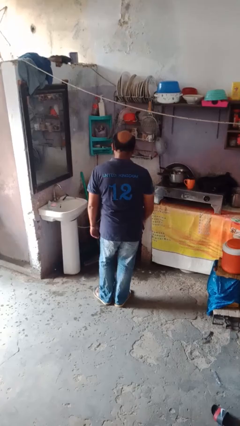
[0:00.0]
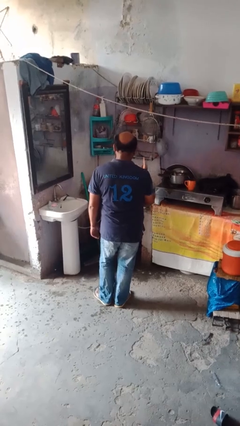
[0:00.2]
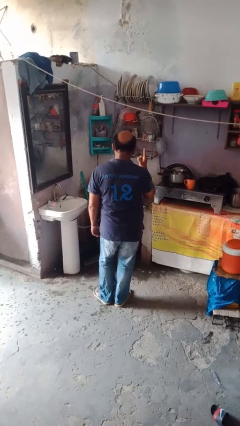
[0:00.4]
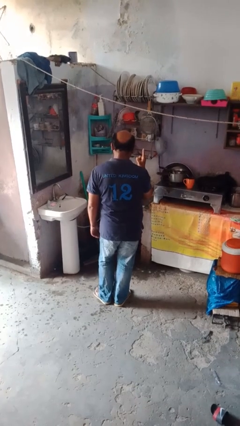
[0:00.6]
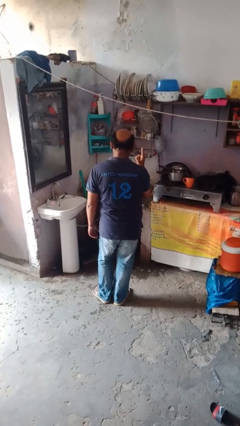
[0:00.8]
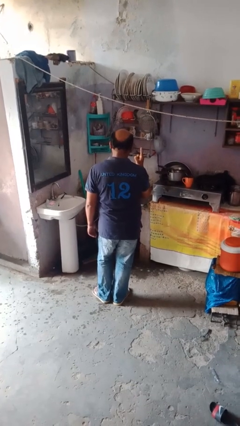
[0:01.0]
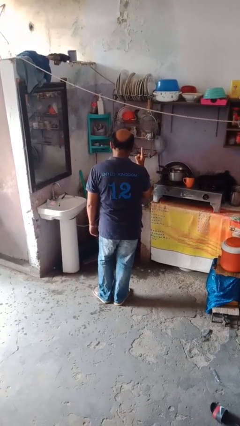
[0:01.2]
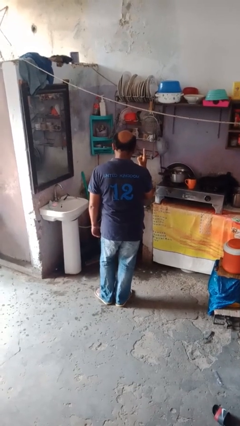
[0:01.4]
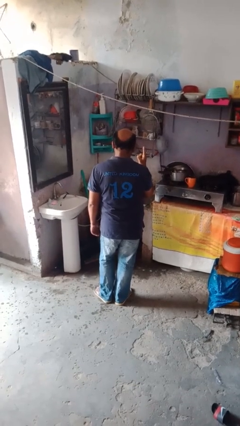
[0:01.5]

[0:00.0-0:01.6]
person gestures number one

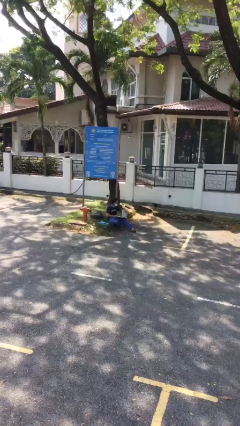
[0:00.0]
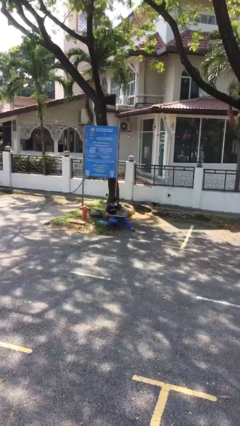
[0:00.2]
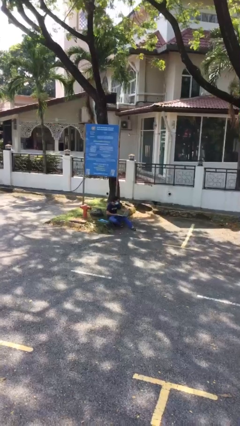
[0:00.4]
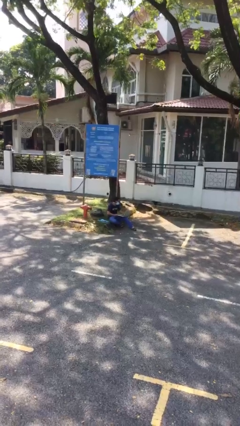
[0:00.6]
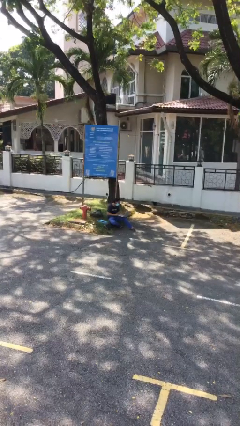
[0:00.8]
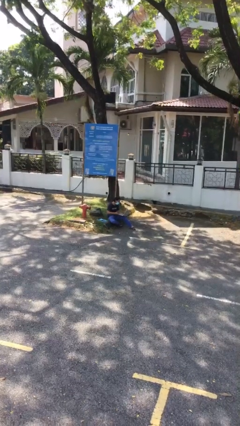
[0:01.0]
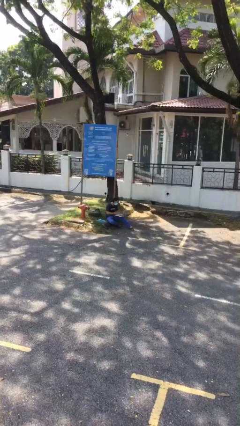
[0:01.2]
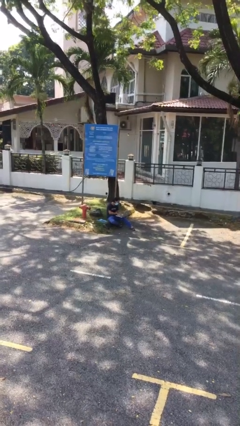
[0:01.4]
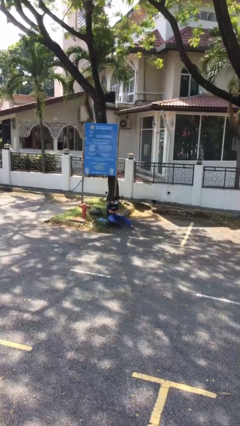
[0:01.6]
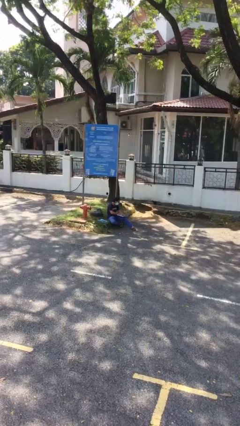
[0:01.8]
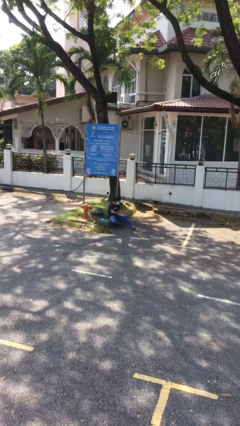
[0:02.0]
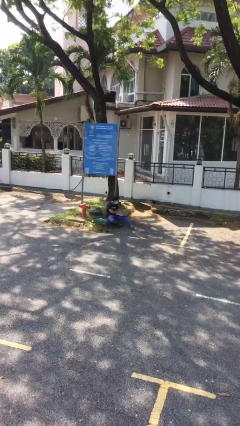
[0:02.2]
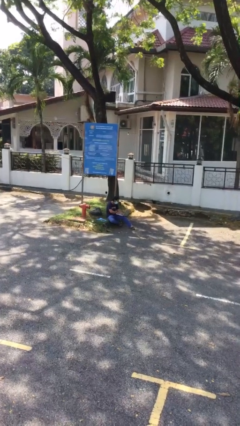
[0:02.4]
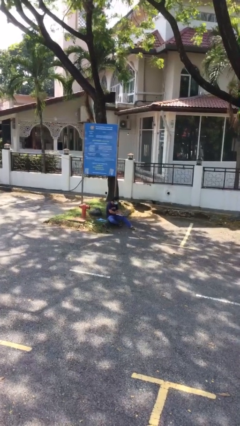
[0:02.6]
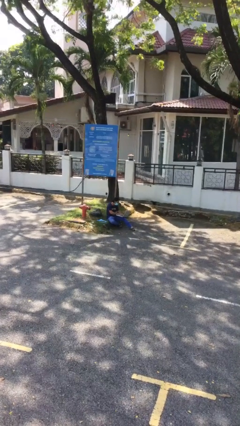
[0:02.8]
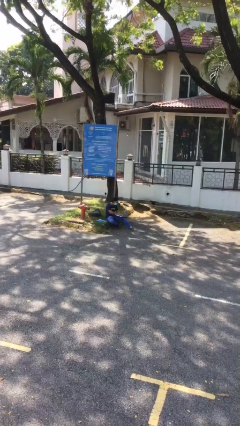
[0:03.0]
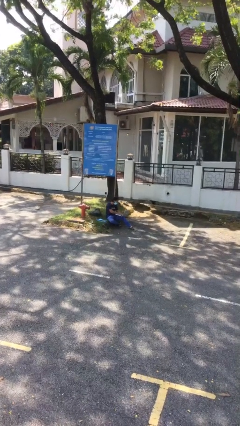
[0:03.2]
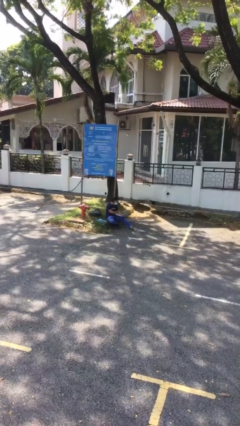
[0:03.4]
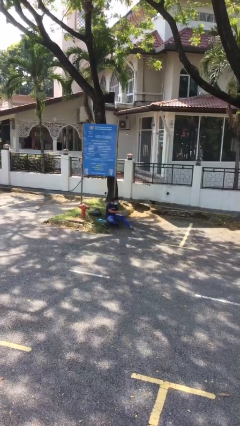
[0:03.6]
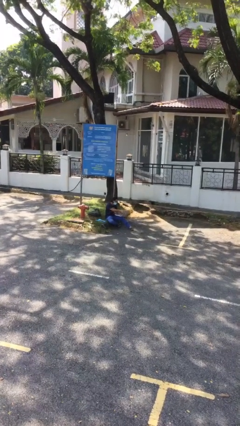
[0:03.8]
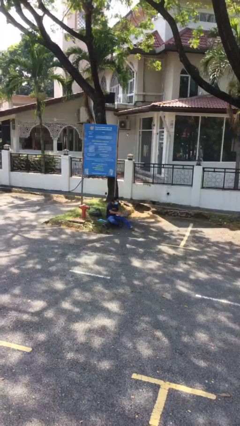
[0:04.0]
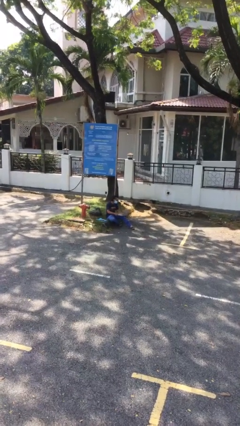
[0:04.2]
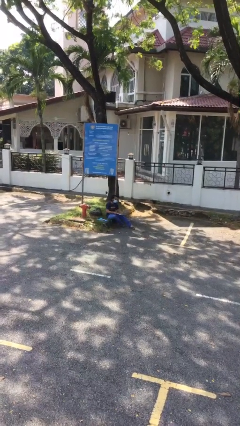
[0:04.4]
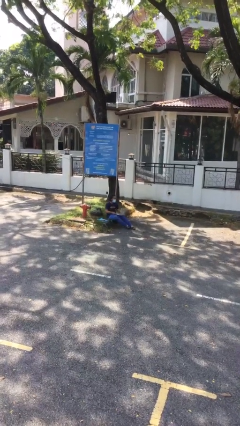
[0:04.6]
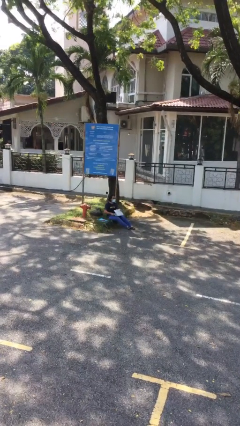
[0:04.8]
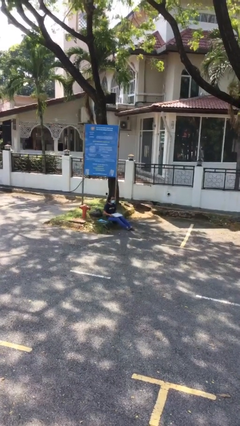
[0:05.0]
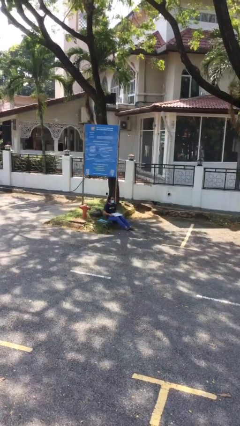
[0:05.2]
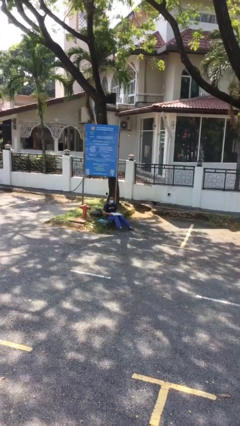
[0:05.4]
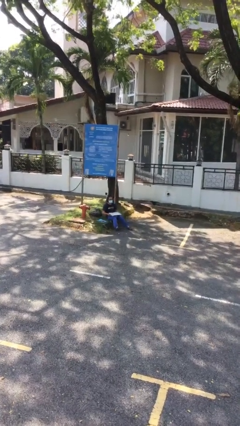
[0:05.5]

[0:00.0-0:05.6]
person interacts with laptop

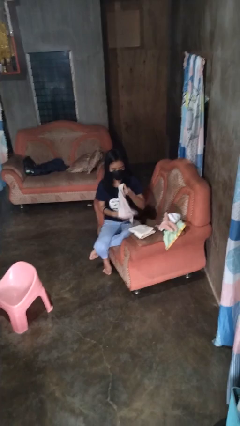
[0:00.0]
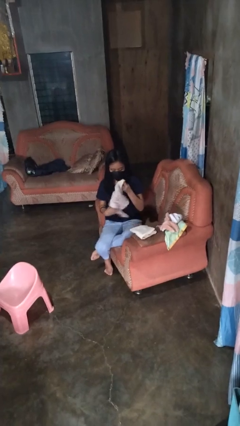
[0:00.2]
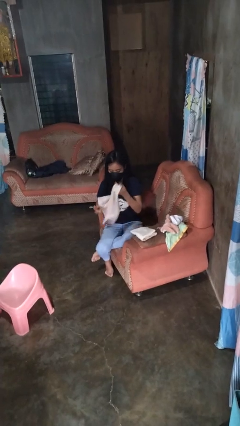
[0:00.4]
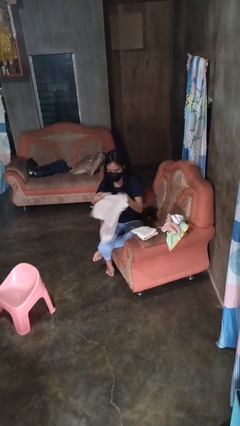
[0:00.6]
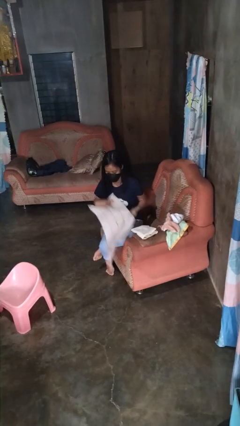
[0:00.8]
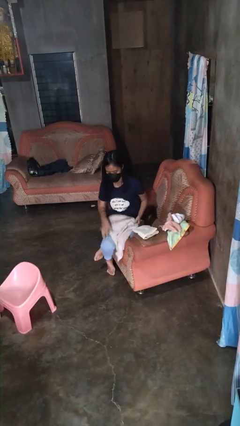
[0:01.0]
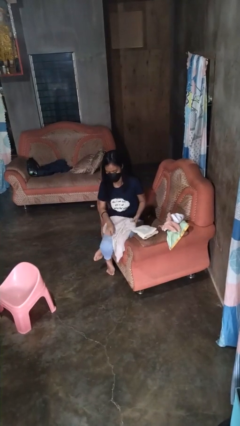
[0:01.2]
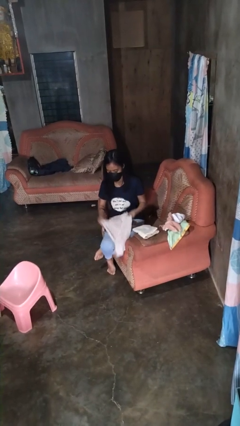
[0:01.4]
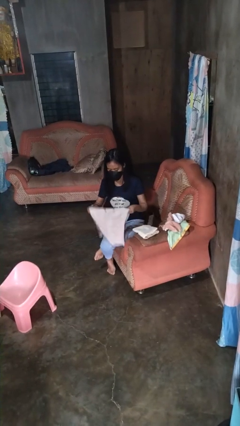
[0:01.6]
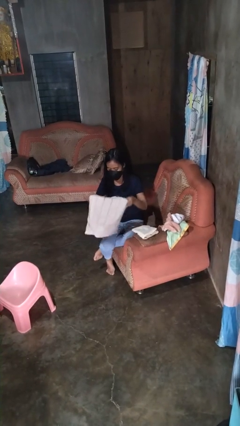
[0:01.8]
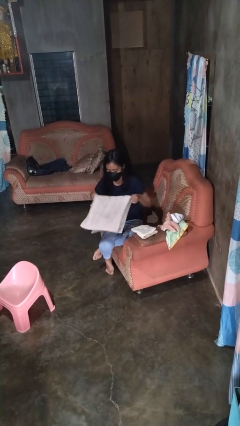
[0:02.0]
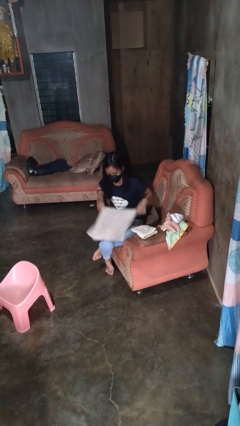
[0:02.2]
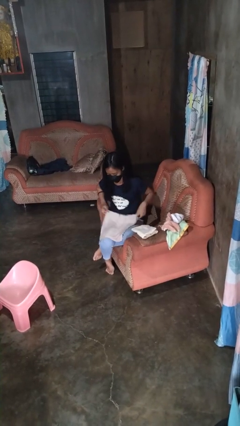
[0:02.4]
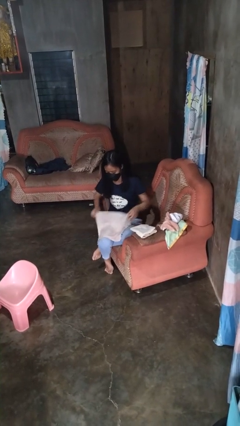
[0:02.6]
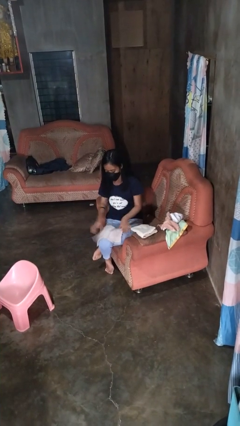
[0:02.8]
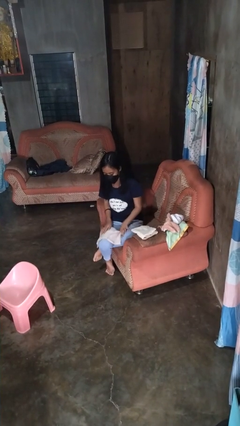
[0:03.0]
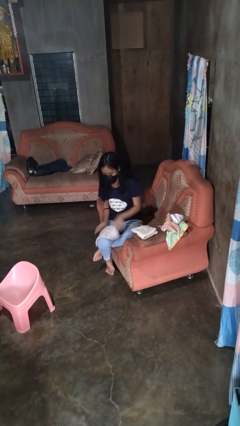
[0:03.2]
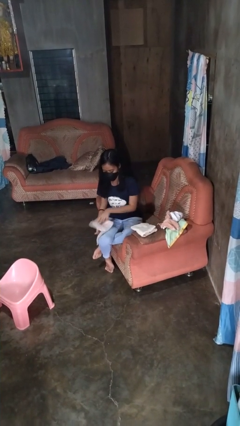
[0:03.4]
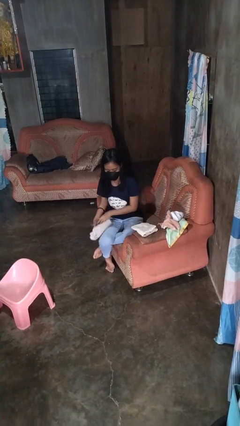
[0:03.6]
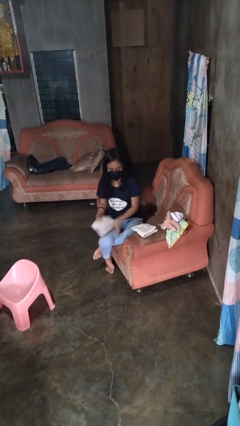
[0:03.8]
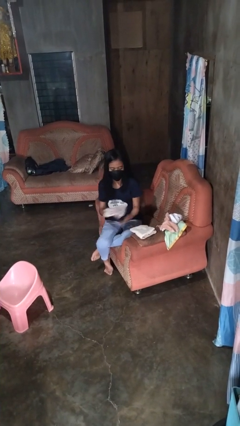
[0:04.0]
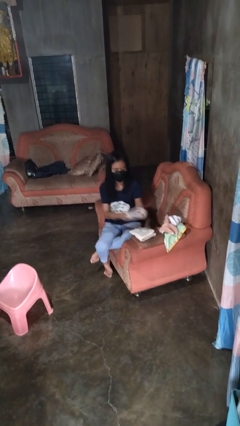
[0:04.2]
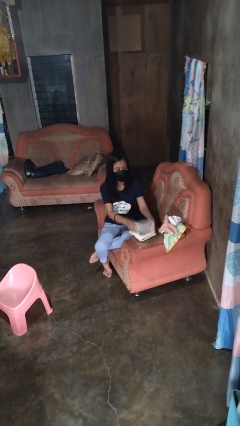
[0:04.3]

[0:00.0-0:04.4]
person folds towel

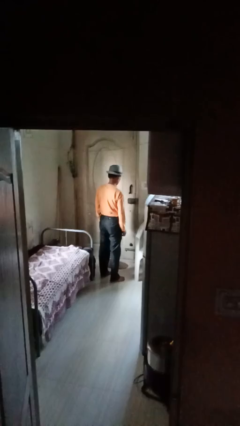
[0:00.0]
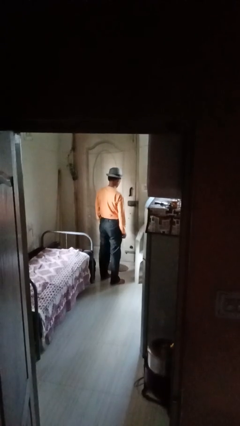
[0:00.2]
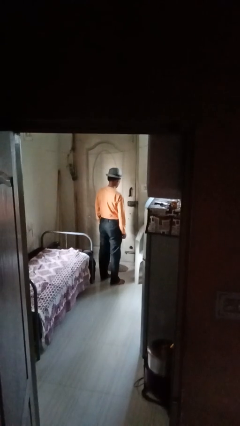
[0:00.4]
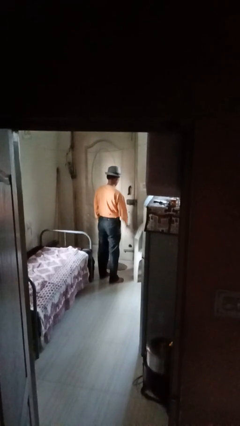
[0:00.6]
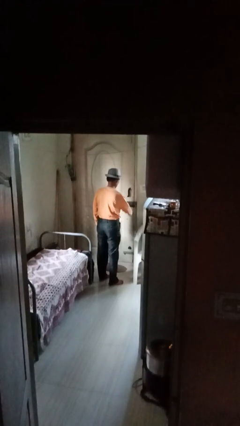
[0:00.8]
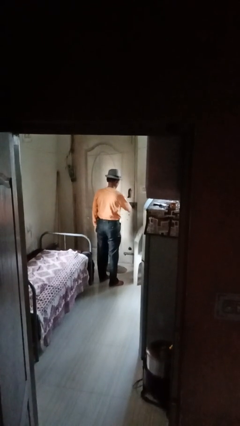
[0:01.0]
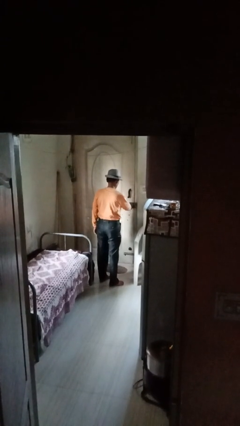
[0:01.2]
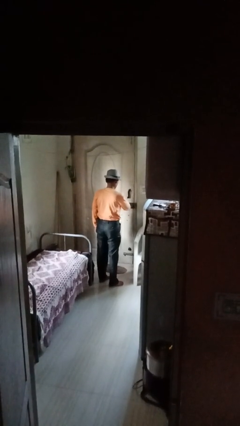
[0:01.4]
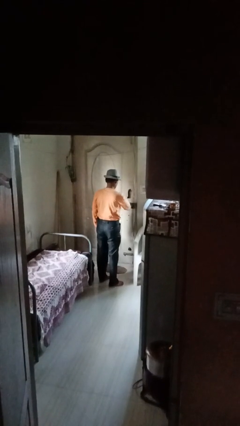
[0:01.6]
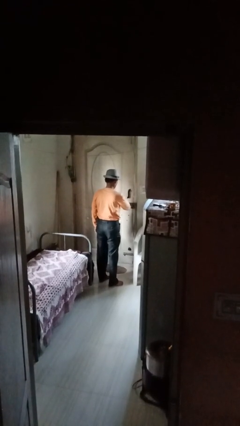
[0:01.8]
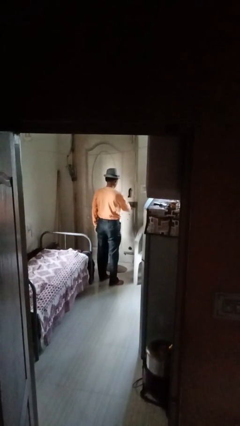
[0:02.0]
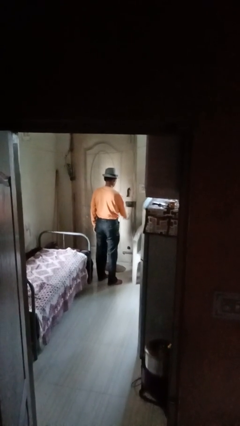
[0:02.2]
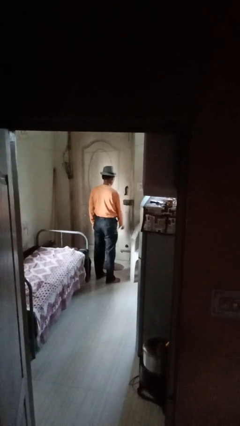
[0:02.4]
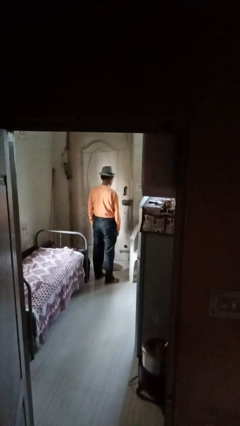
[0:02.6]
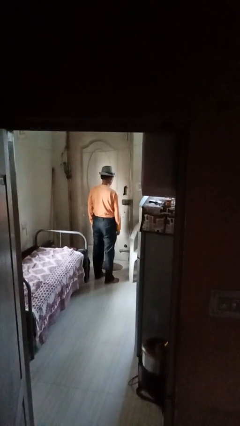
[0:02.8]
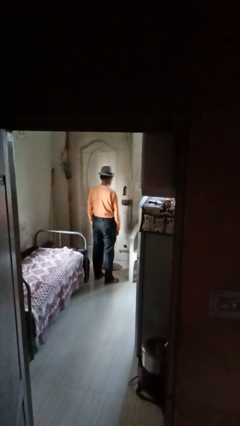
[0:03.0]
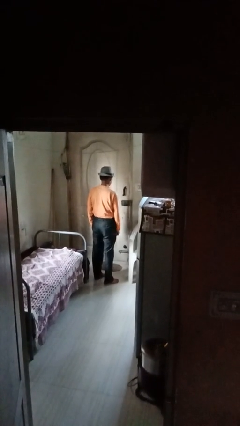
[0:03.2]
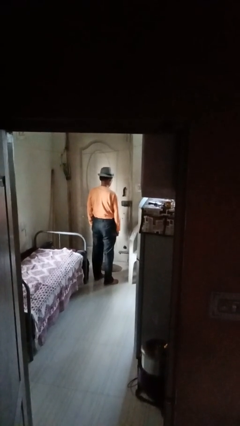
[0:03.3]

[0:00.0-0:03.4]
person unlocks door with keys

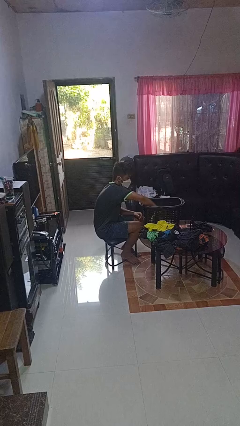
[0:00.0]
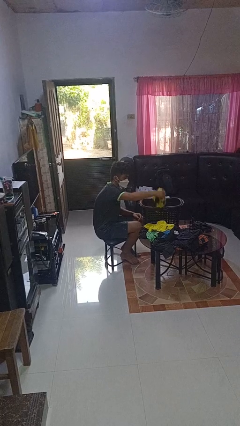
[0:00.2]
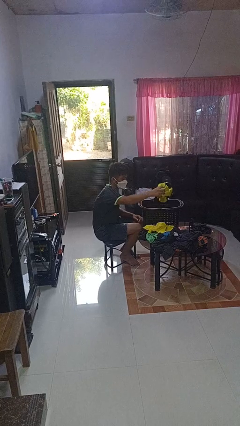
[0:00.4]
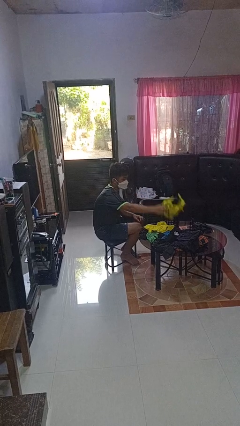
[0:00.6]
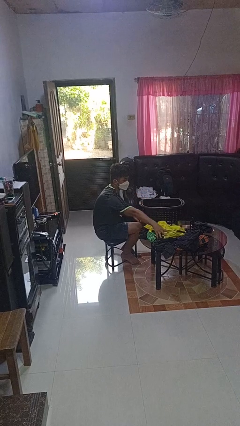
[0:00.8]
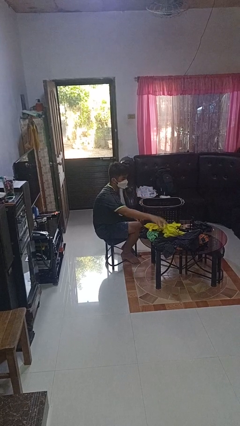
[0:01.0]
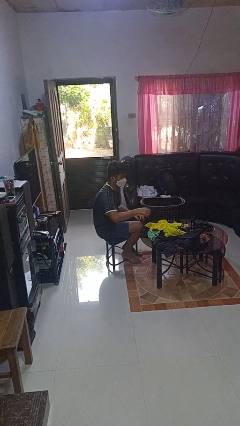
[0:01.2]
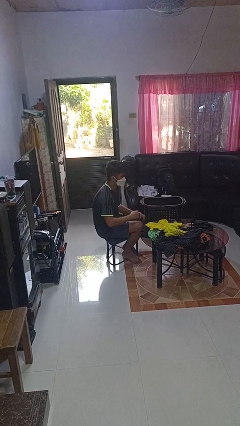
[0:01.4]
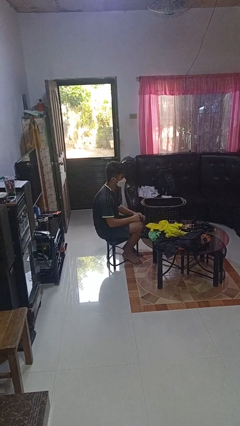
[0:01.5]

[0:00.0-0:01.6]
person takes object from basket

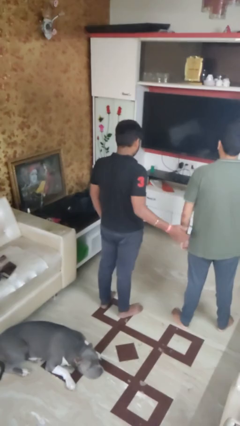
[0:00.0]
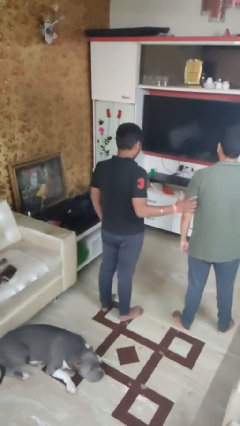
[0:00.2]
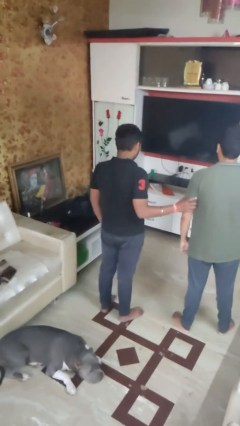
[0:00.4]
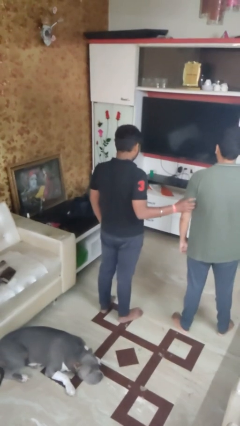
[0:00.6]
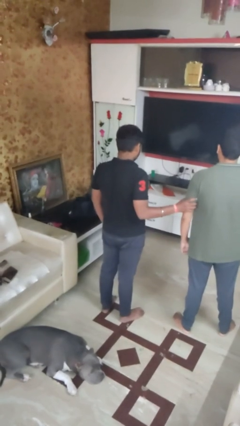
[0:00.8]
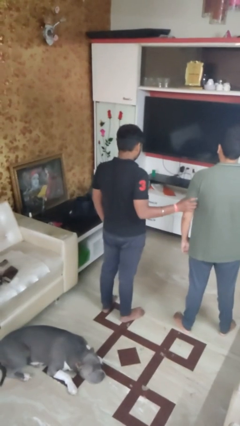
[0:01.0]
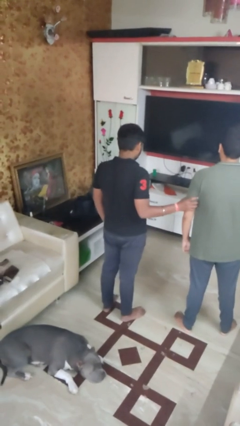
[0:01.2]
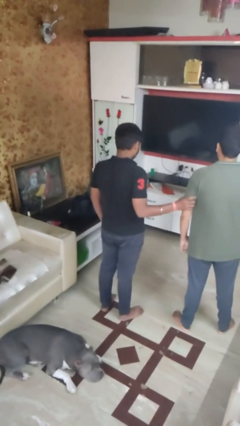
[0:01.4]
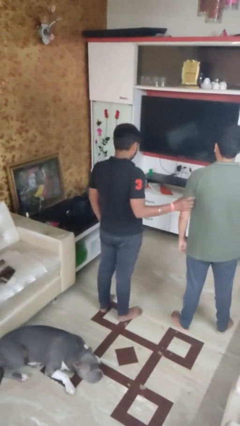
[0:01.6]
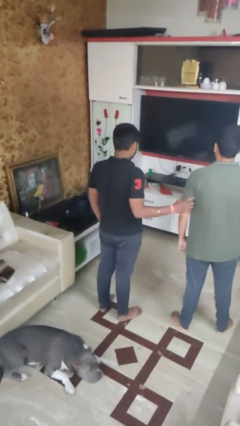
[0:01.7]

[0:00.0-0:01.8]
person grabs person by bicep
